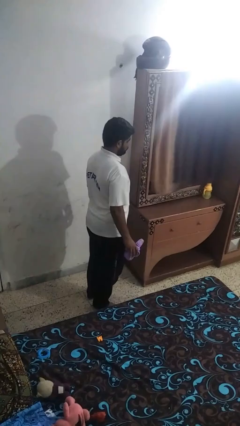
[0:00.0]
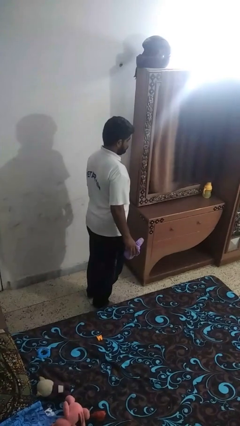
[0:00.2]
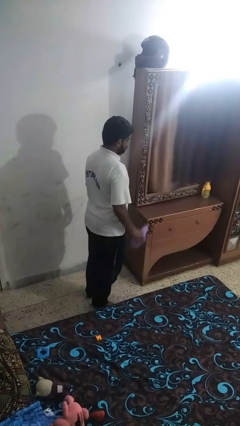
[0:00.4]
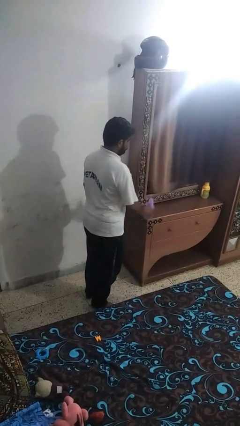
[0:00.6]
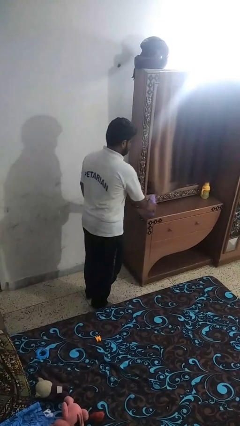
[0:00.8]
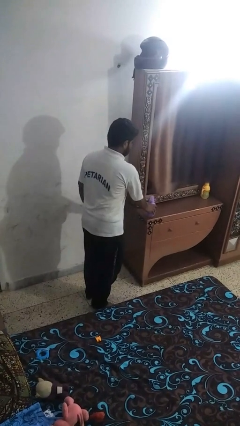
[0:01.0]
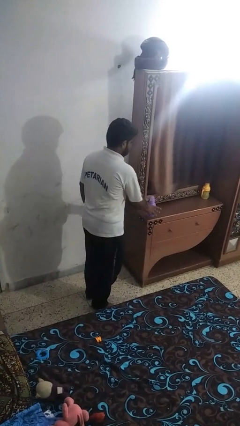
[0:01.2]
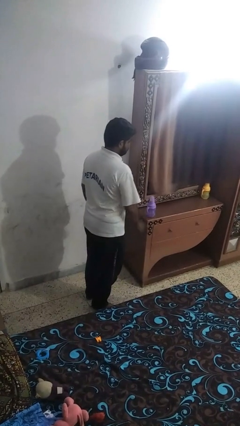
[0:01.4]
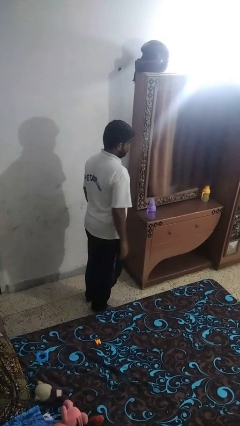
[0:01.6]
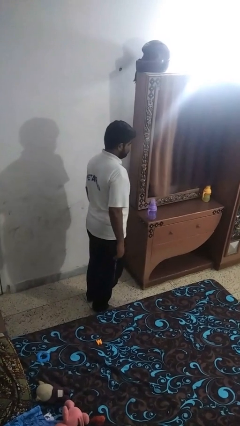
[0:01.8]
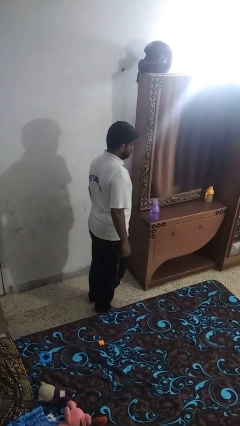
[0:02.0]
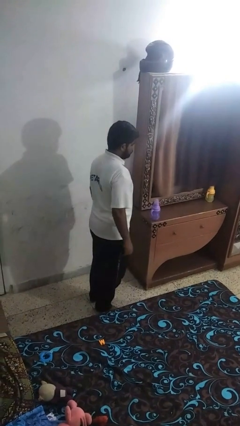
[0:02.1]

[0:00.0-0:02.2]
person puts down object on countertop

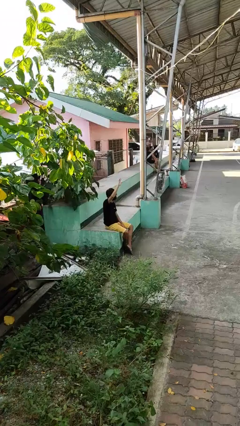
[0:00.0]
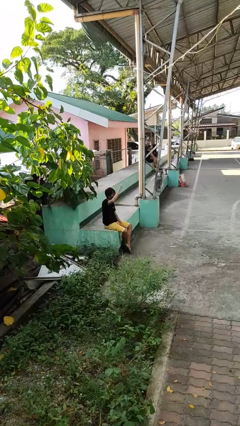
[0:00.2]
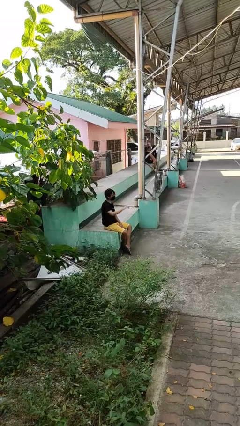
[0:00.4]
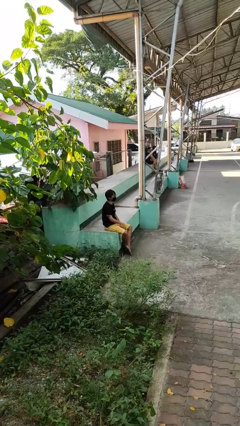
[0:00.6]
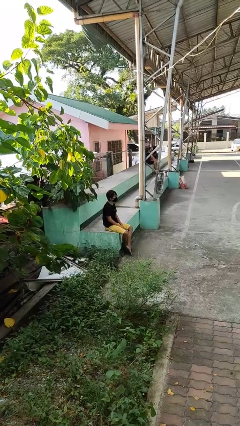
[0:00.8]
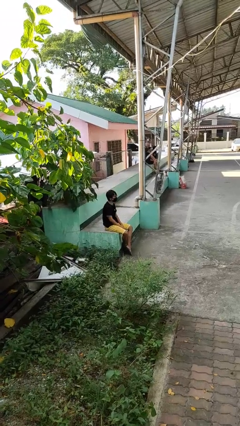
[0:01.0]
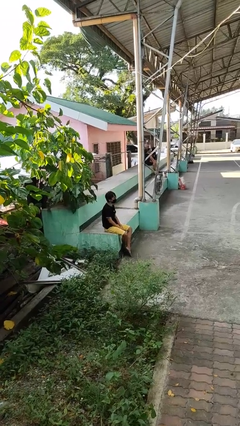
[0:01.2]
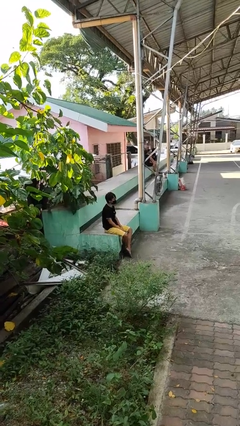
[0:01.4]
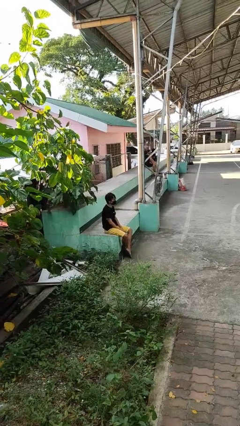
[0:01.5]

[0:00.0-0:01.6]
person gestures lower hand

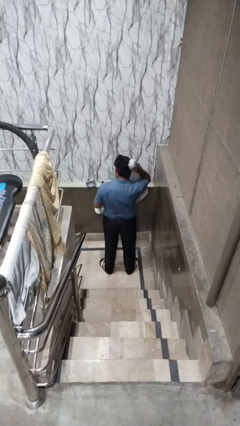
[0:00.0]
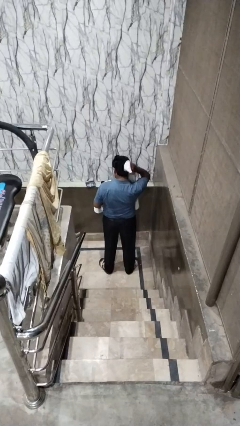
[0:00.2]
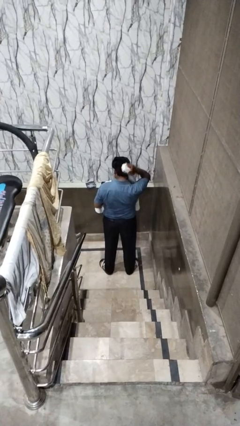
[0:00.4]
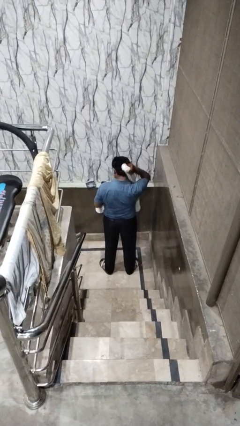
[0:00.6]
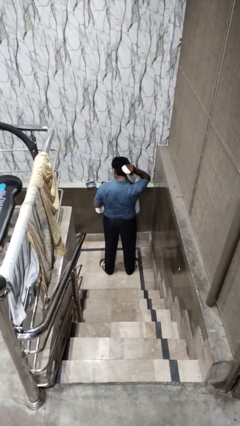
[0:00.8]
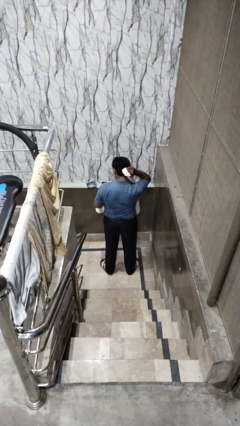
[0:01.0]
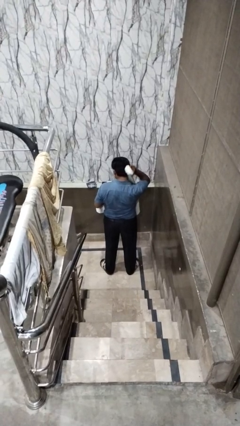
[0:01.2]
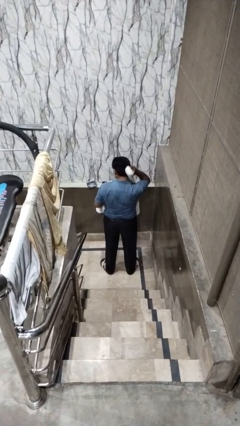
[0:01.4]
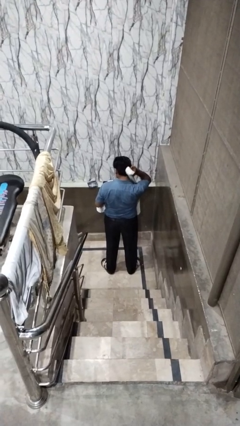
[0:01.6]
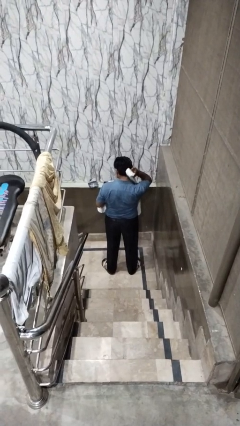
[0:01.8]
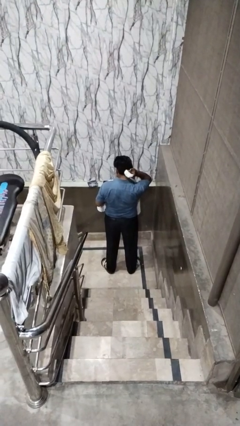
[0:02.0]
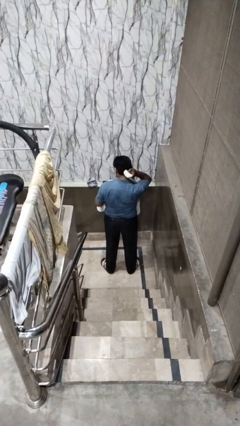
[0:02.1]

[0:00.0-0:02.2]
person dries hair with towel

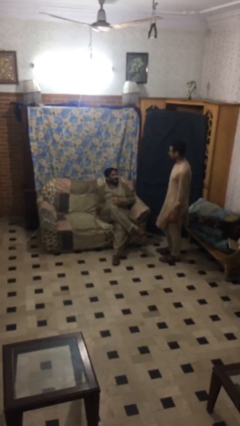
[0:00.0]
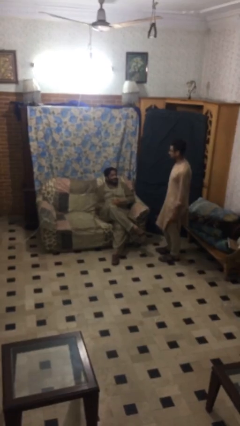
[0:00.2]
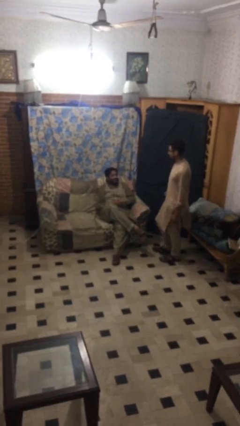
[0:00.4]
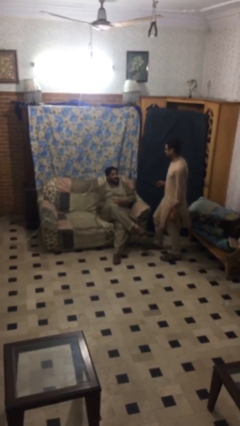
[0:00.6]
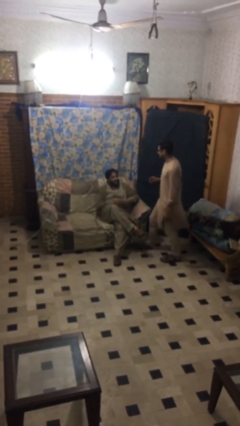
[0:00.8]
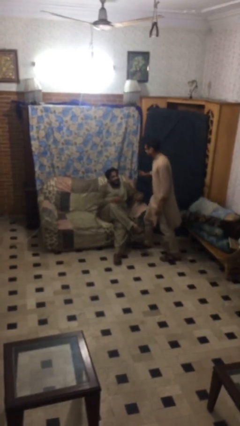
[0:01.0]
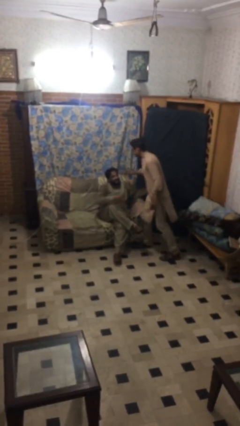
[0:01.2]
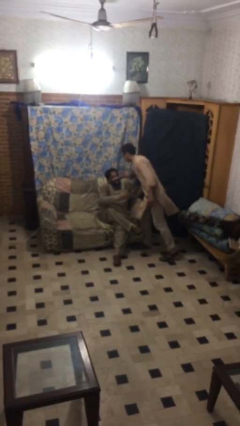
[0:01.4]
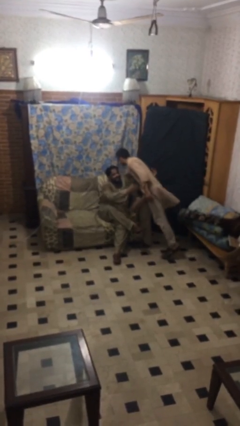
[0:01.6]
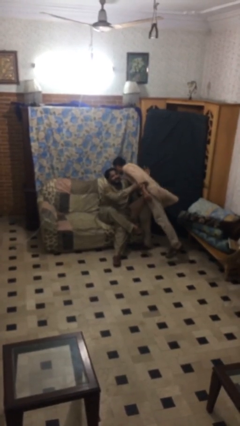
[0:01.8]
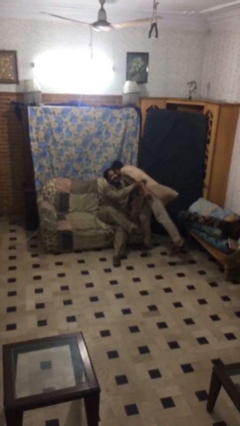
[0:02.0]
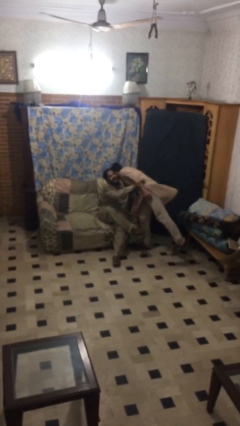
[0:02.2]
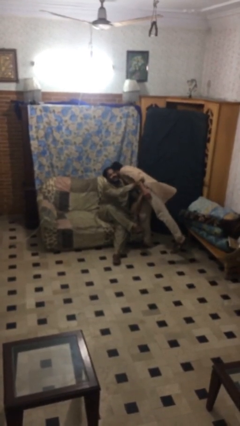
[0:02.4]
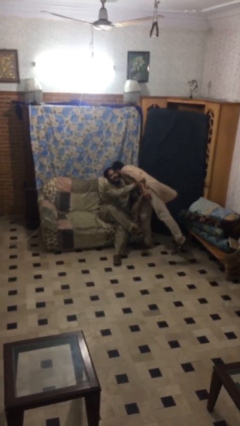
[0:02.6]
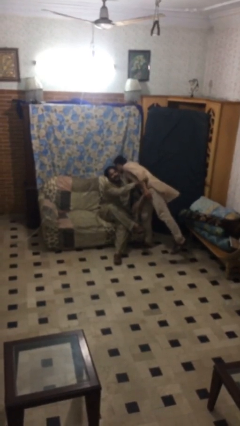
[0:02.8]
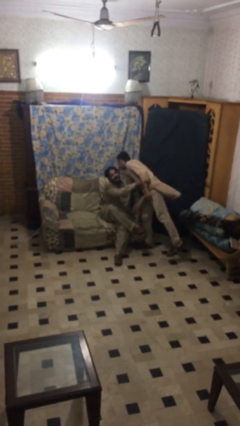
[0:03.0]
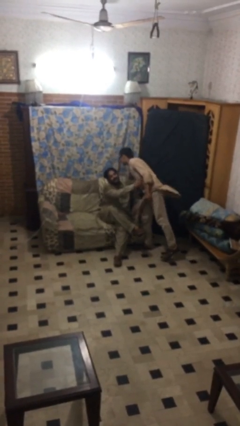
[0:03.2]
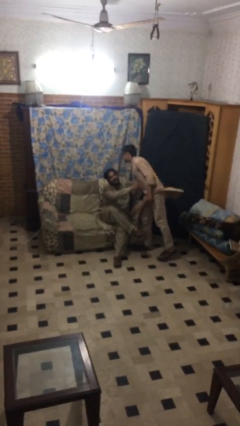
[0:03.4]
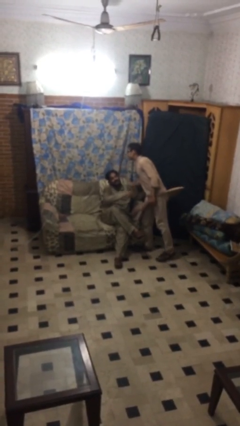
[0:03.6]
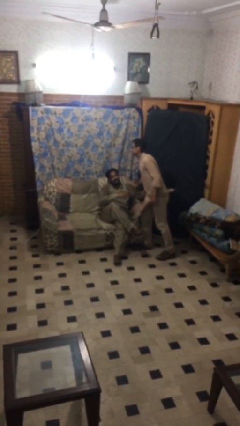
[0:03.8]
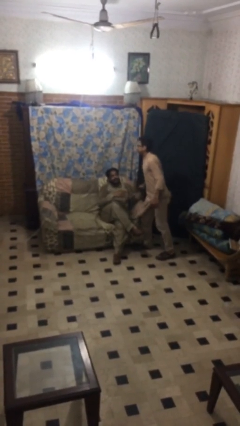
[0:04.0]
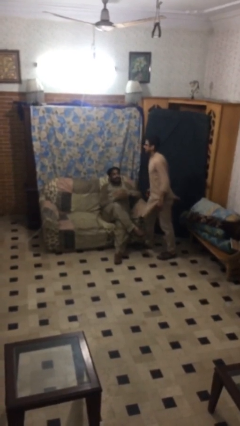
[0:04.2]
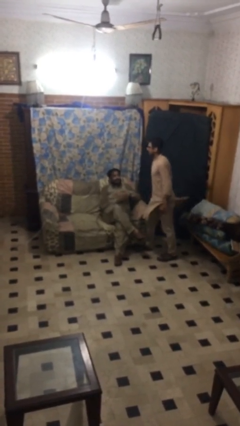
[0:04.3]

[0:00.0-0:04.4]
person embraces person

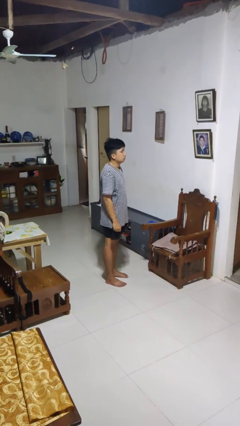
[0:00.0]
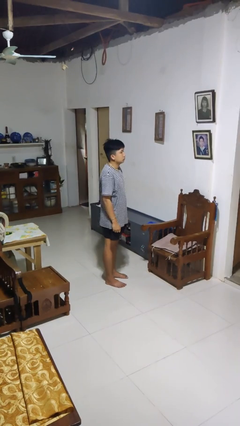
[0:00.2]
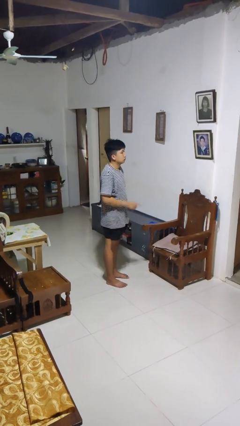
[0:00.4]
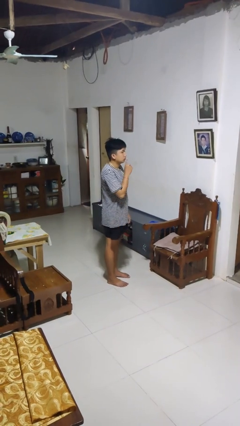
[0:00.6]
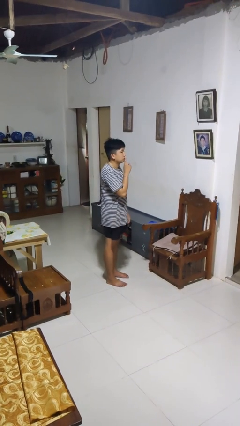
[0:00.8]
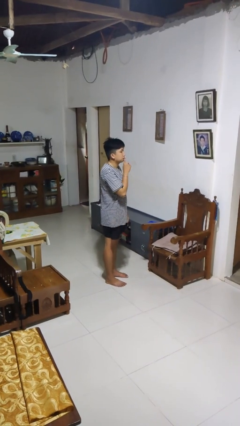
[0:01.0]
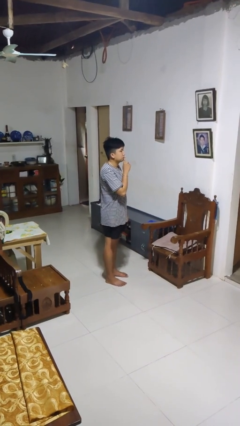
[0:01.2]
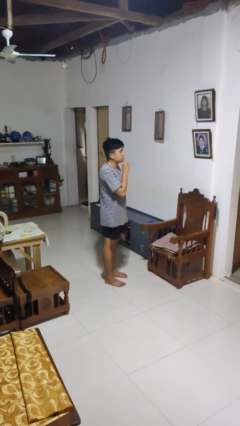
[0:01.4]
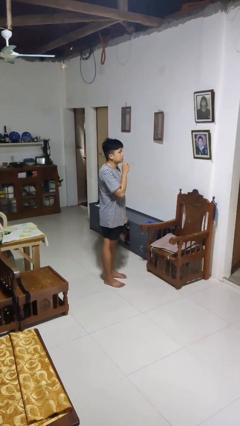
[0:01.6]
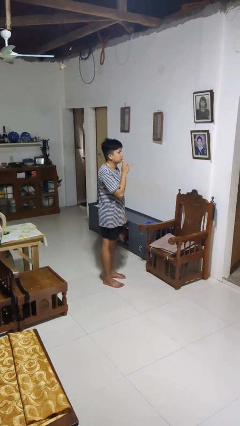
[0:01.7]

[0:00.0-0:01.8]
person gestures be quiet

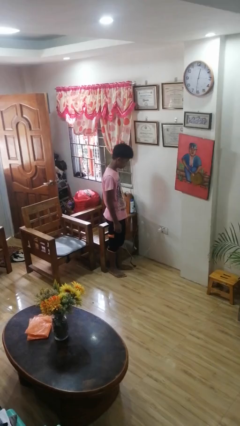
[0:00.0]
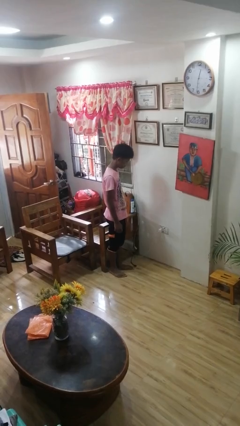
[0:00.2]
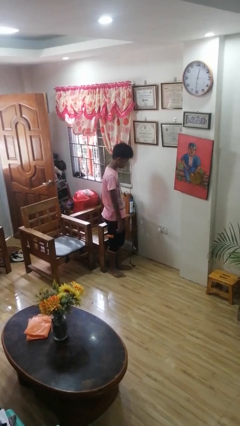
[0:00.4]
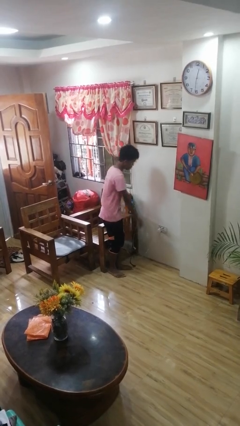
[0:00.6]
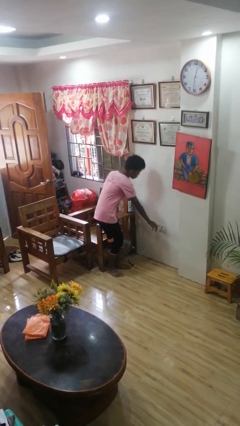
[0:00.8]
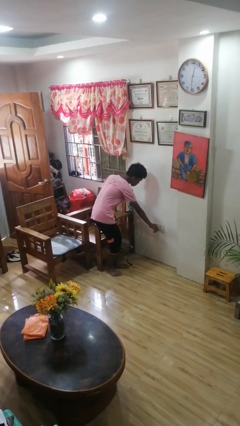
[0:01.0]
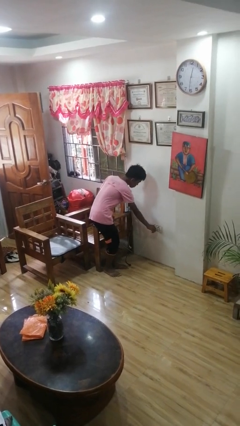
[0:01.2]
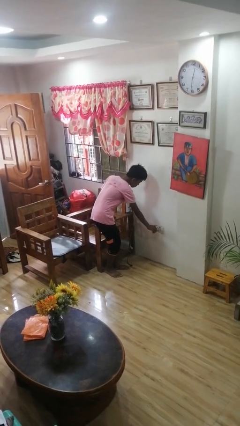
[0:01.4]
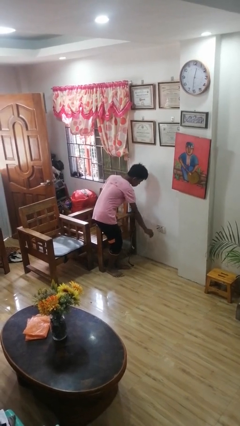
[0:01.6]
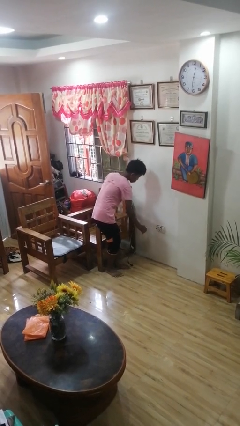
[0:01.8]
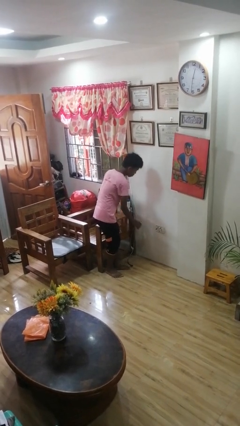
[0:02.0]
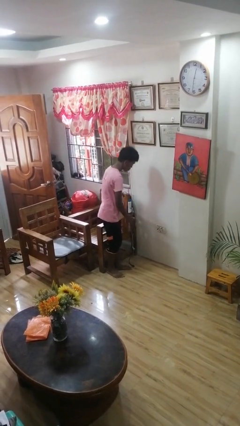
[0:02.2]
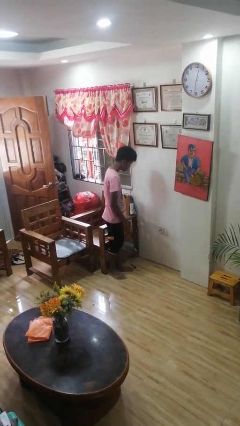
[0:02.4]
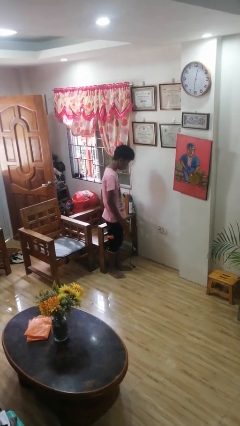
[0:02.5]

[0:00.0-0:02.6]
person unplugs from electrical socket

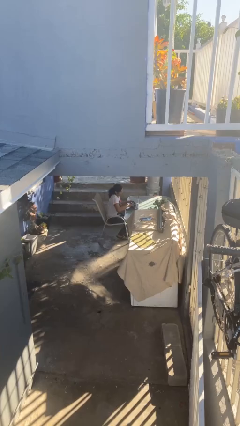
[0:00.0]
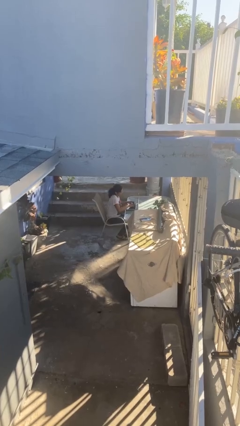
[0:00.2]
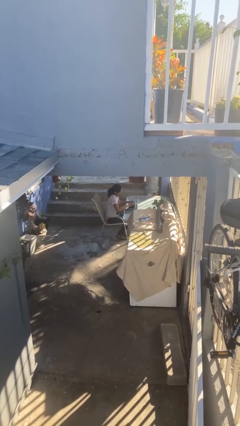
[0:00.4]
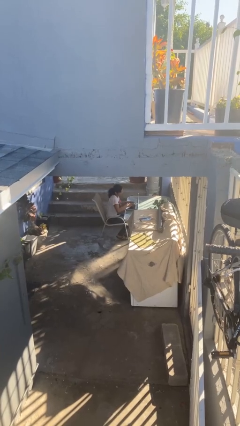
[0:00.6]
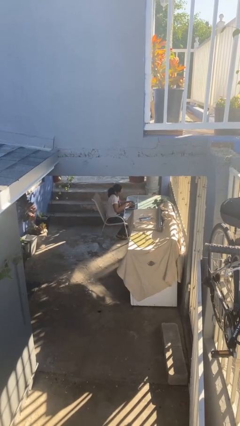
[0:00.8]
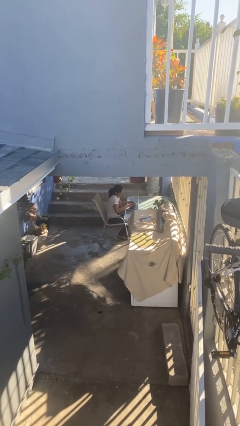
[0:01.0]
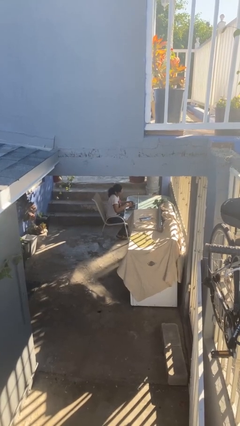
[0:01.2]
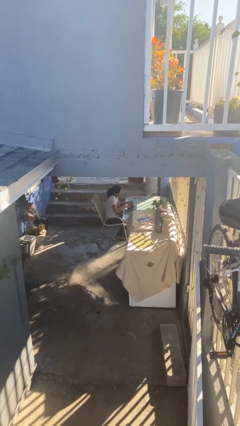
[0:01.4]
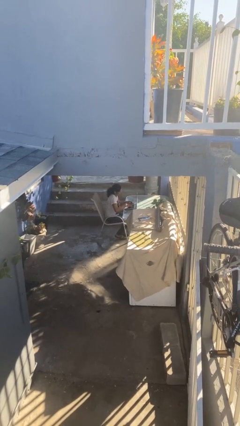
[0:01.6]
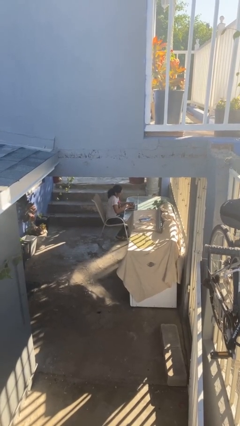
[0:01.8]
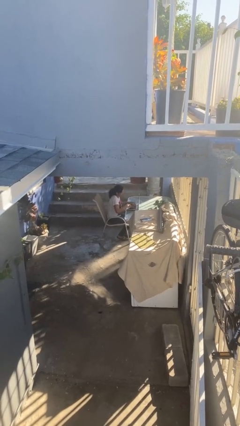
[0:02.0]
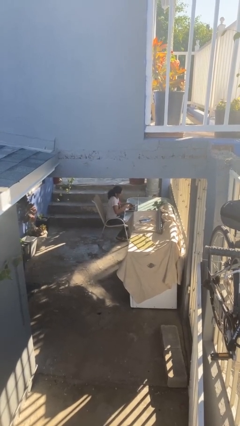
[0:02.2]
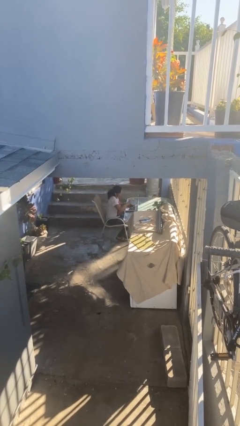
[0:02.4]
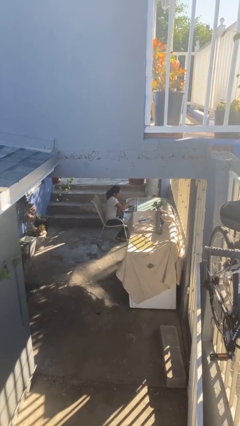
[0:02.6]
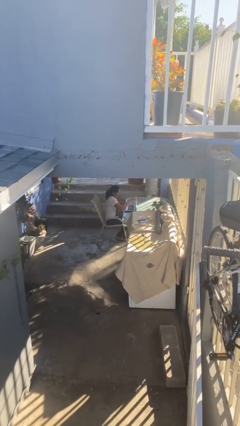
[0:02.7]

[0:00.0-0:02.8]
person interacts with laptop
